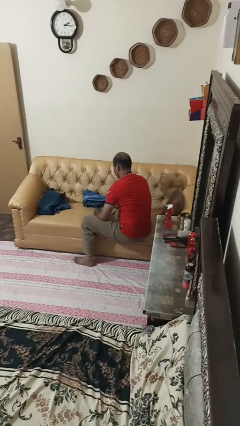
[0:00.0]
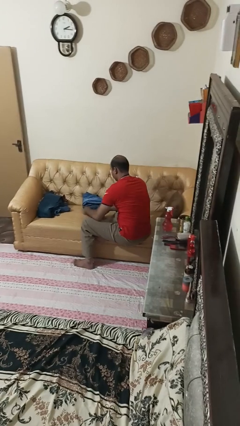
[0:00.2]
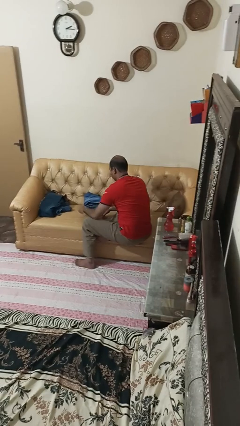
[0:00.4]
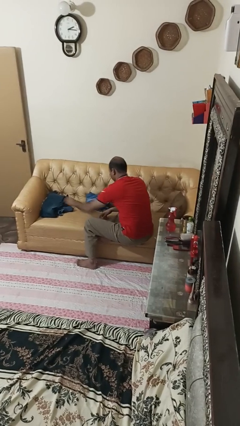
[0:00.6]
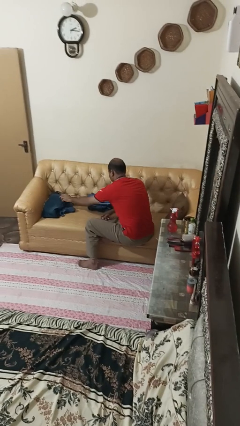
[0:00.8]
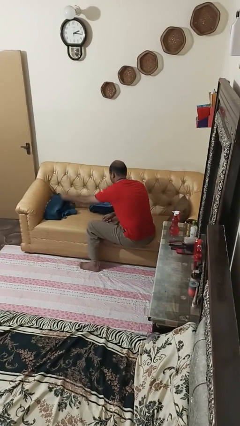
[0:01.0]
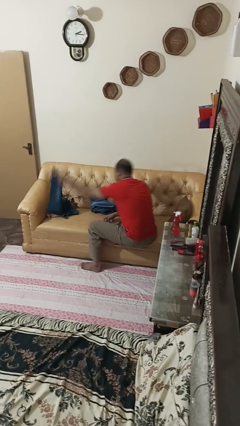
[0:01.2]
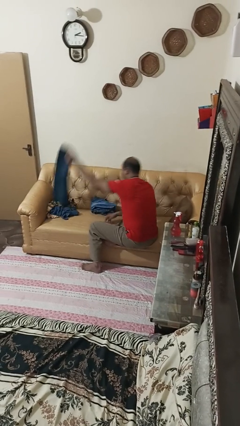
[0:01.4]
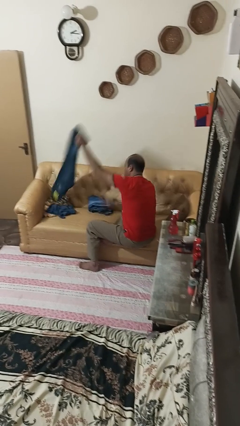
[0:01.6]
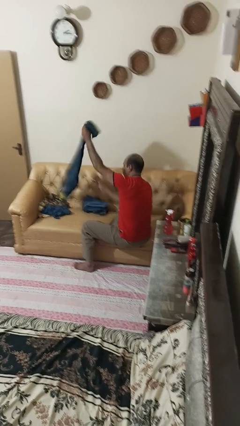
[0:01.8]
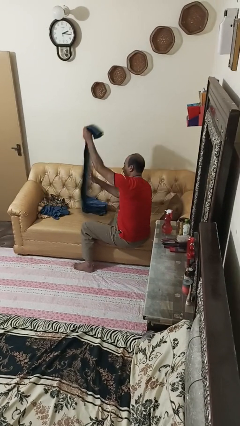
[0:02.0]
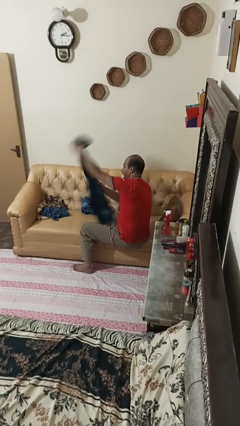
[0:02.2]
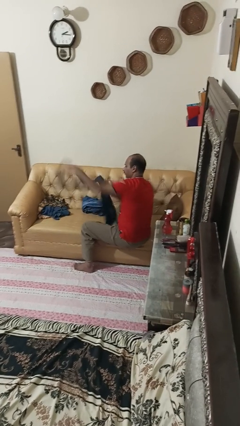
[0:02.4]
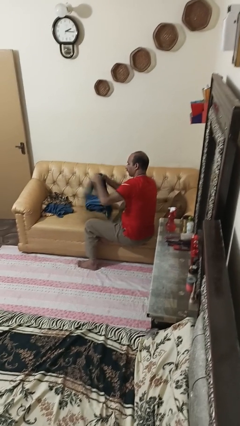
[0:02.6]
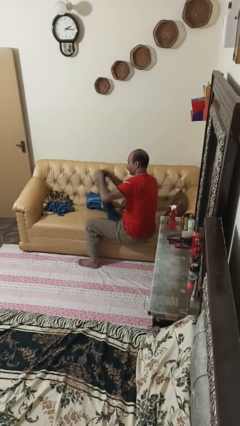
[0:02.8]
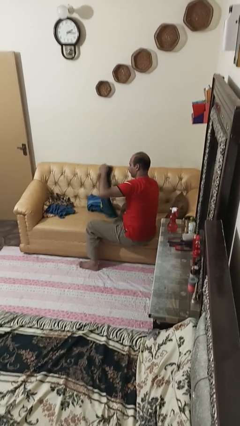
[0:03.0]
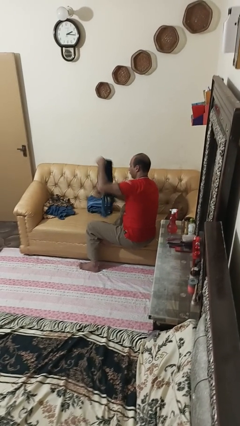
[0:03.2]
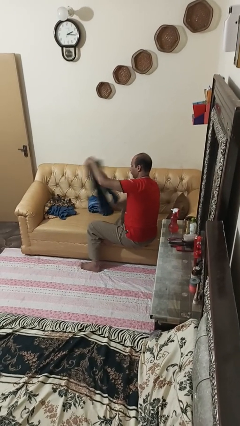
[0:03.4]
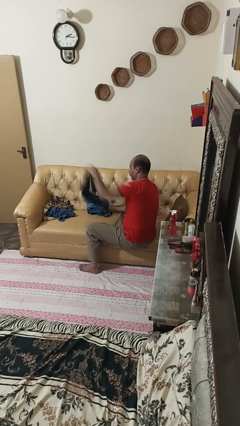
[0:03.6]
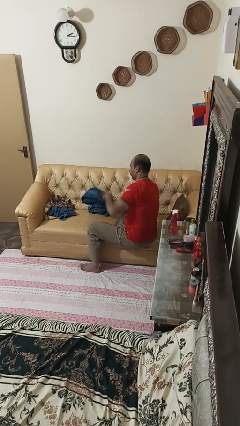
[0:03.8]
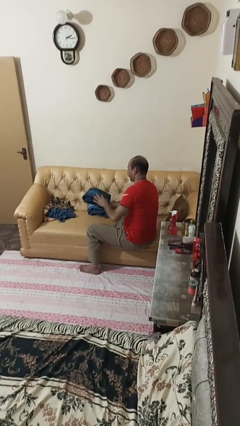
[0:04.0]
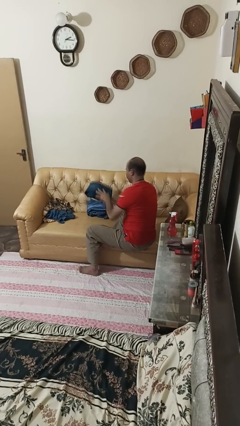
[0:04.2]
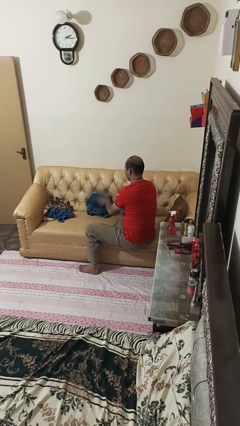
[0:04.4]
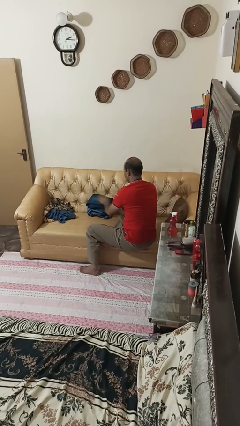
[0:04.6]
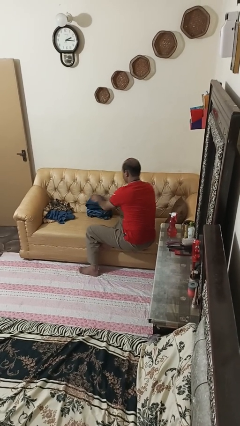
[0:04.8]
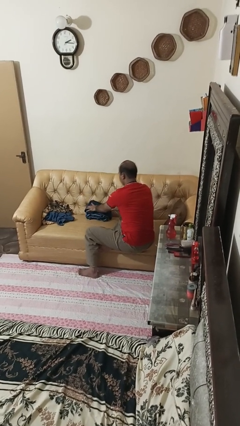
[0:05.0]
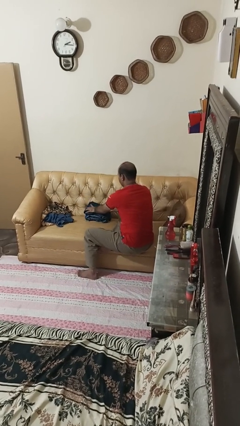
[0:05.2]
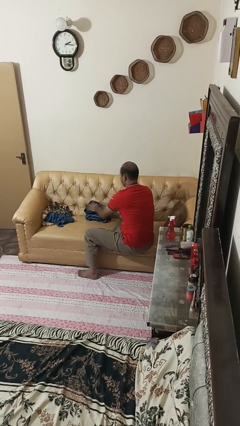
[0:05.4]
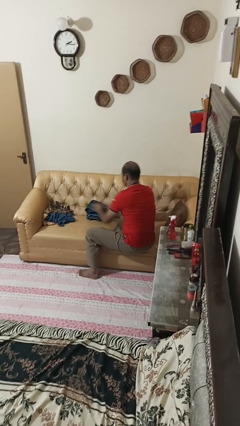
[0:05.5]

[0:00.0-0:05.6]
person folds pants

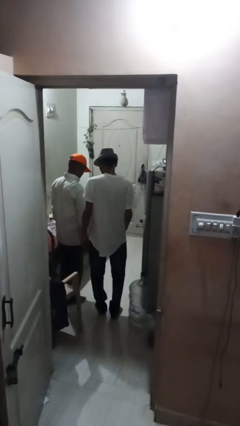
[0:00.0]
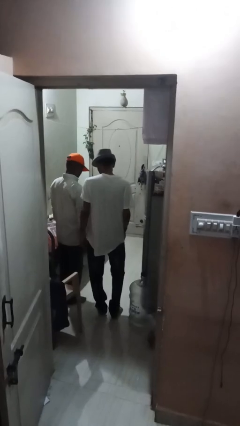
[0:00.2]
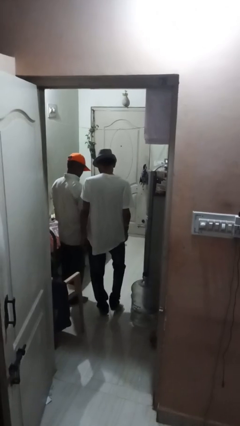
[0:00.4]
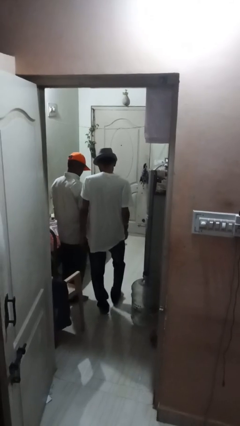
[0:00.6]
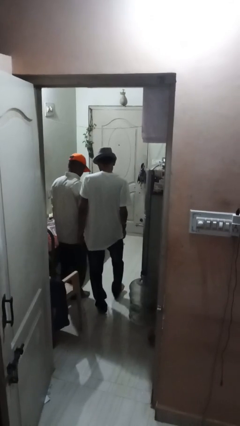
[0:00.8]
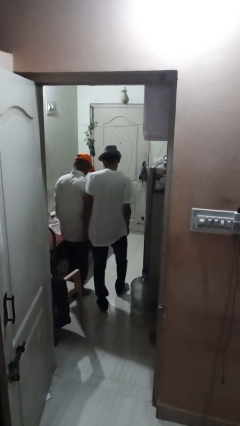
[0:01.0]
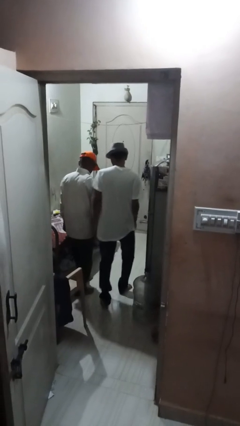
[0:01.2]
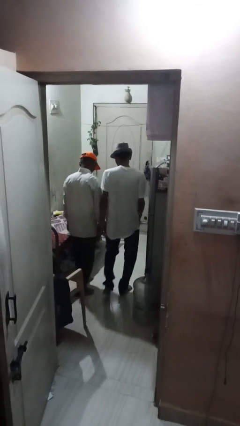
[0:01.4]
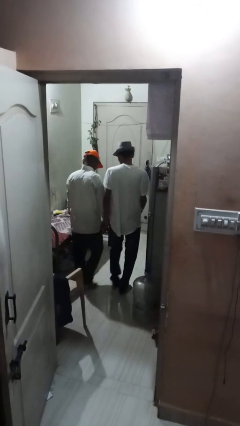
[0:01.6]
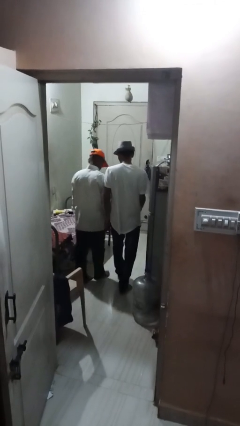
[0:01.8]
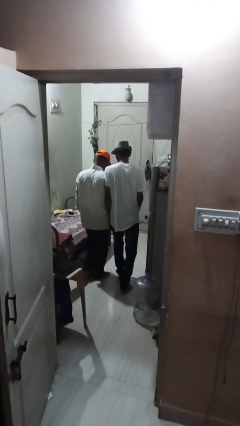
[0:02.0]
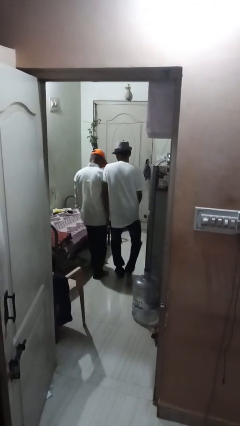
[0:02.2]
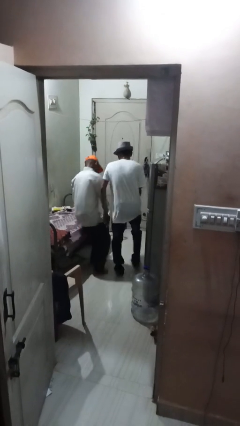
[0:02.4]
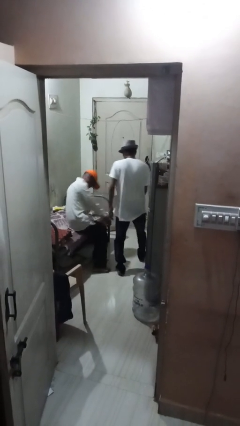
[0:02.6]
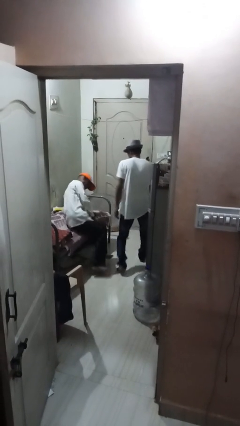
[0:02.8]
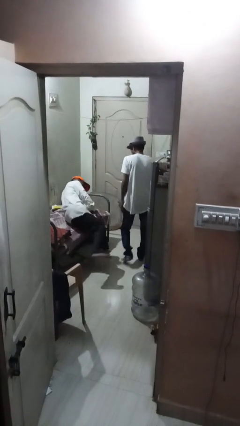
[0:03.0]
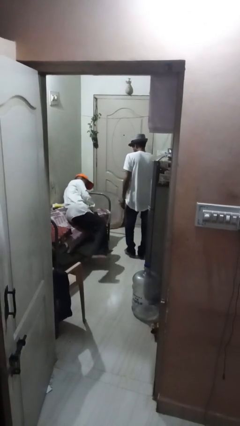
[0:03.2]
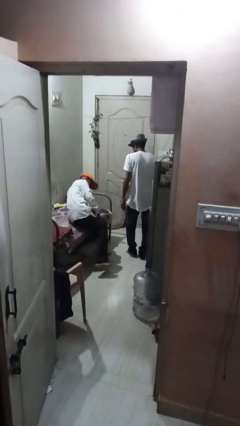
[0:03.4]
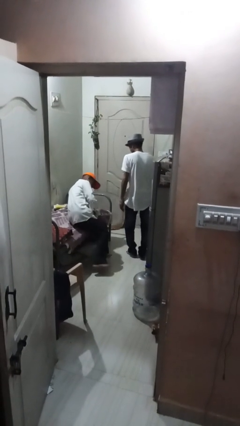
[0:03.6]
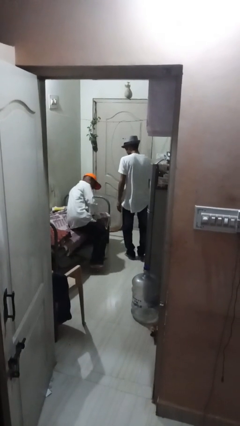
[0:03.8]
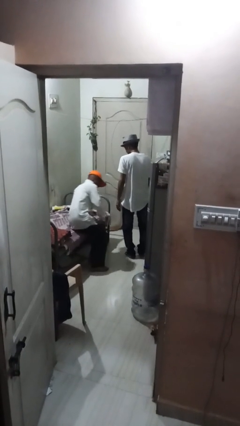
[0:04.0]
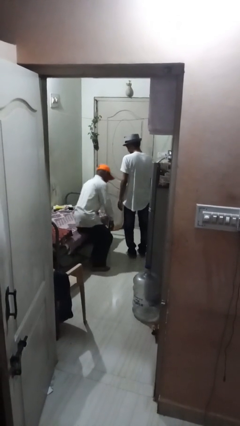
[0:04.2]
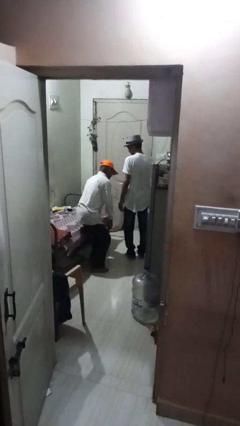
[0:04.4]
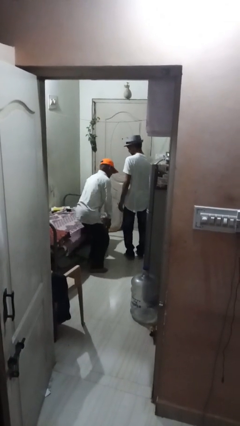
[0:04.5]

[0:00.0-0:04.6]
person bumps into person

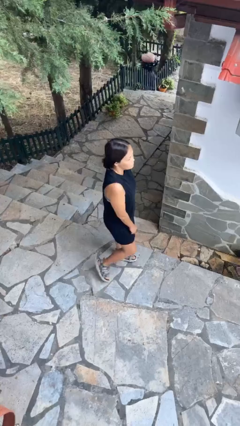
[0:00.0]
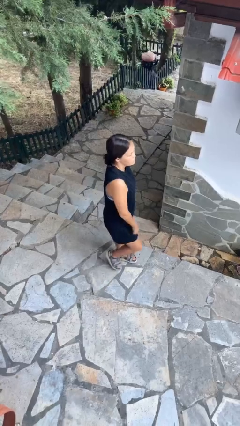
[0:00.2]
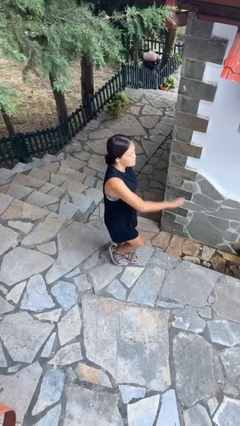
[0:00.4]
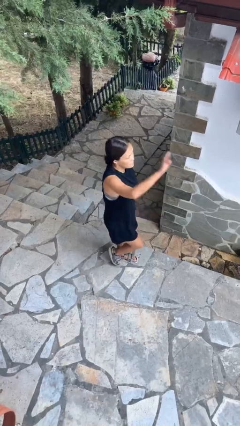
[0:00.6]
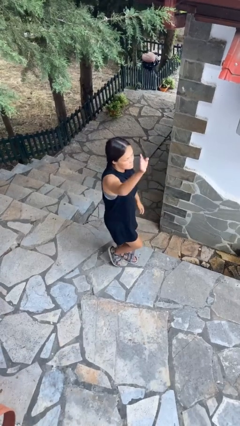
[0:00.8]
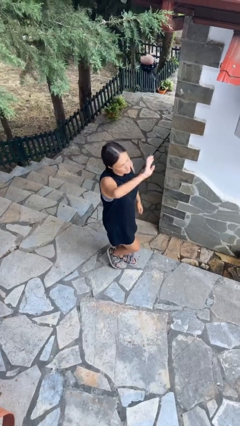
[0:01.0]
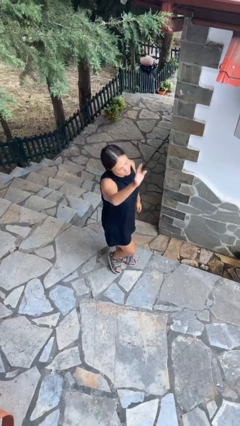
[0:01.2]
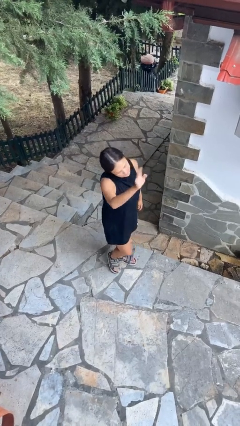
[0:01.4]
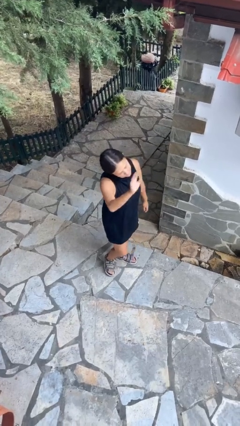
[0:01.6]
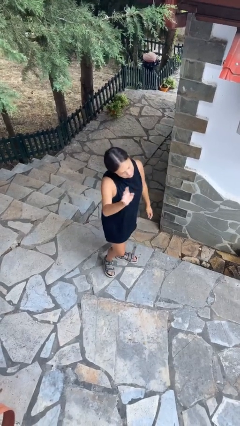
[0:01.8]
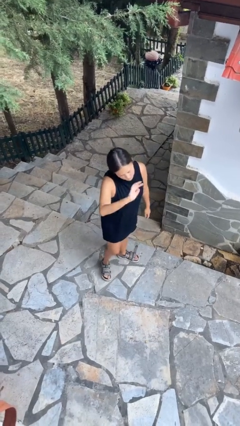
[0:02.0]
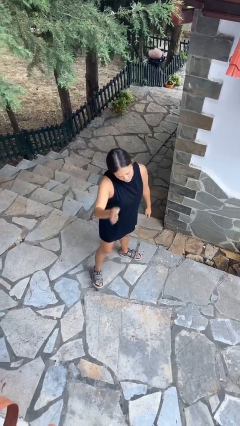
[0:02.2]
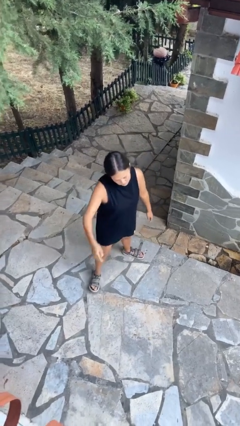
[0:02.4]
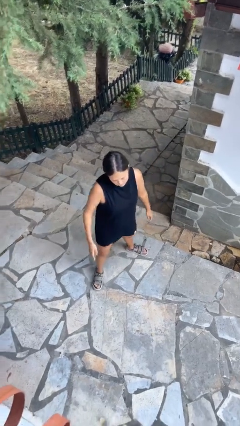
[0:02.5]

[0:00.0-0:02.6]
person waves at person

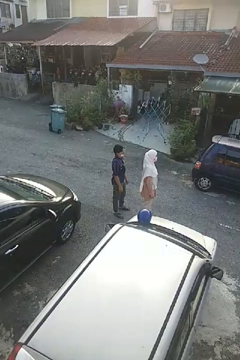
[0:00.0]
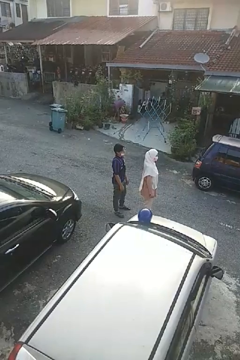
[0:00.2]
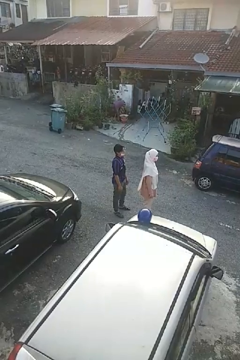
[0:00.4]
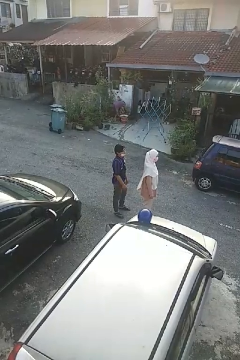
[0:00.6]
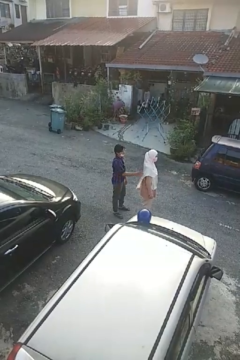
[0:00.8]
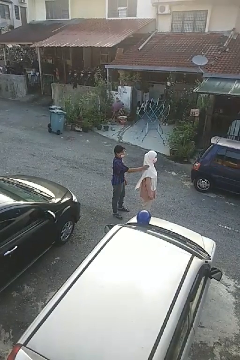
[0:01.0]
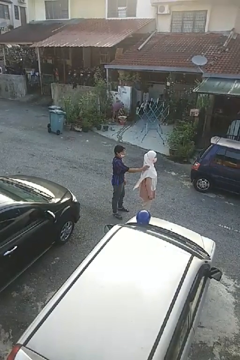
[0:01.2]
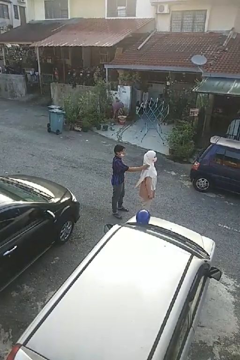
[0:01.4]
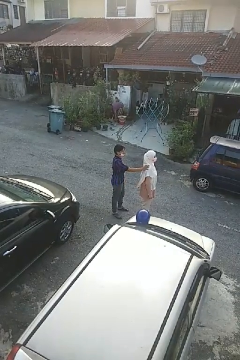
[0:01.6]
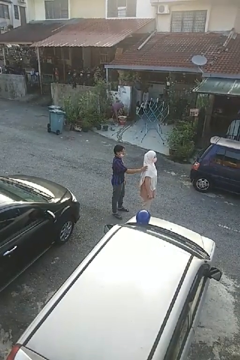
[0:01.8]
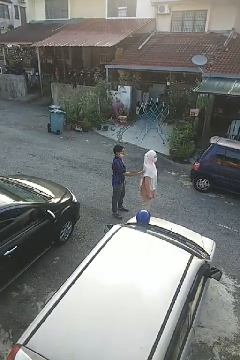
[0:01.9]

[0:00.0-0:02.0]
person touches back of person

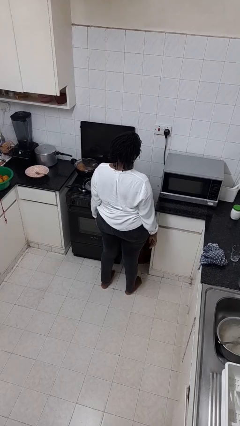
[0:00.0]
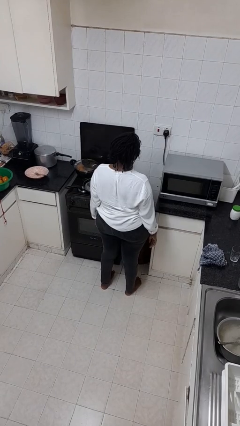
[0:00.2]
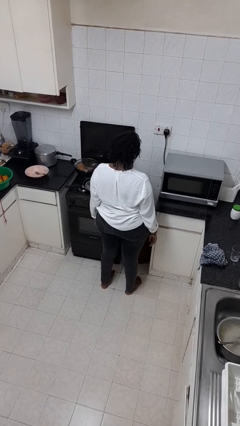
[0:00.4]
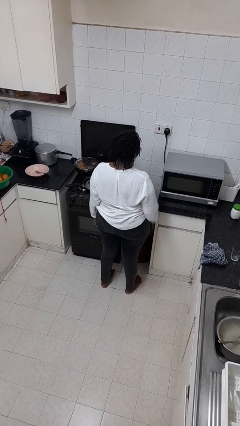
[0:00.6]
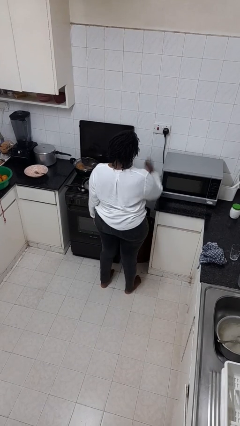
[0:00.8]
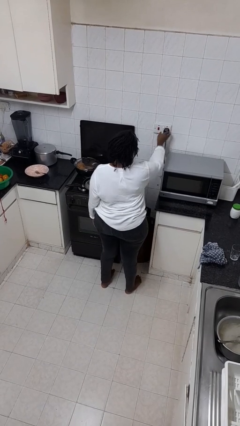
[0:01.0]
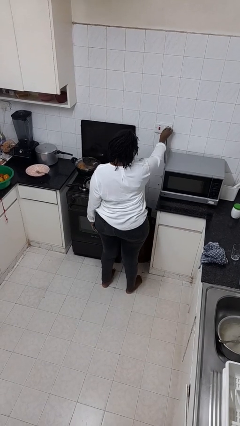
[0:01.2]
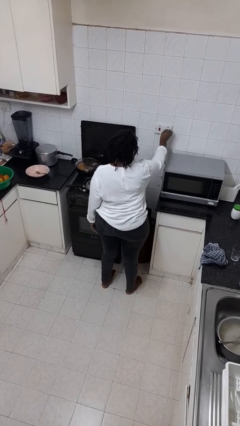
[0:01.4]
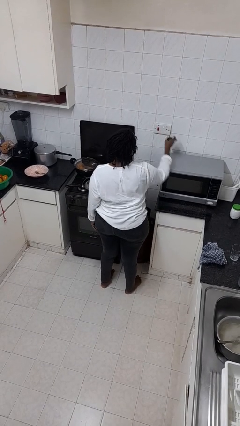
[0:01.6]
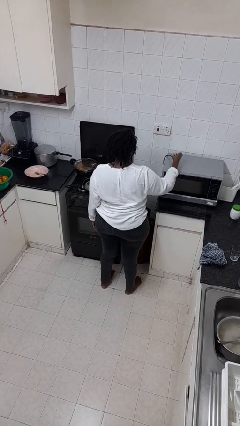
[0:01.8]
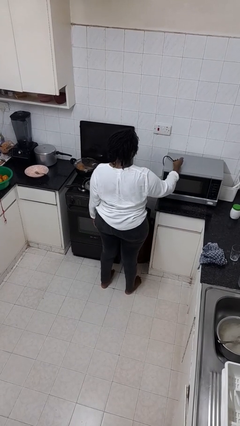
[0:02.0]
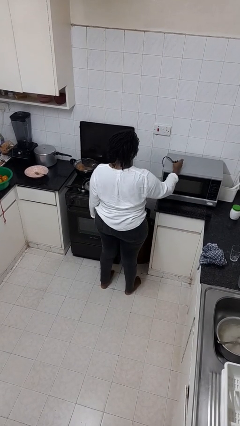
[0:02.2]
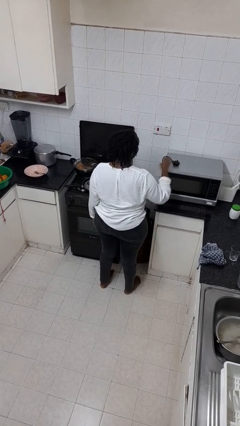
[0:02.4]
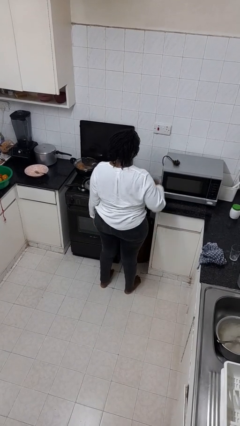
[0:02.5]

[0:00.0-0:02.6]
person unplugs from electrical socket

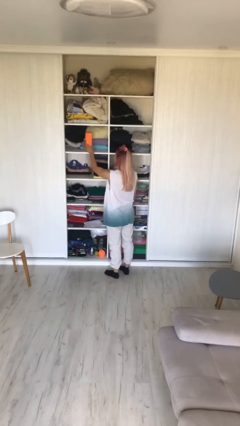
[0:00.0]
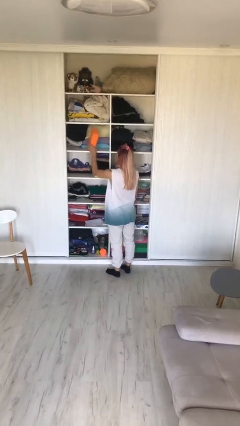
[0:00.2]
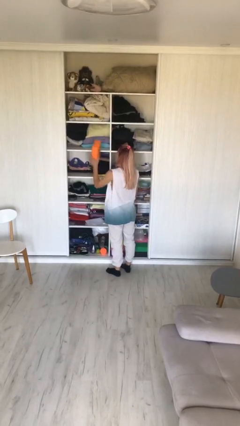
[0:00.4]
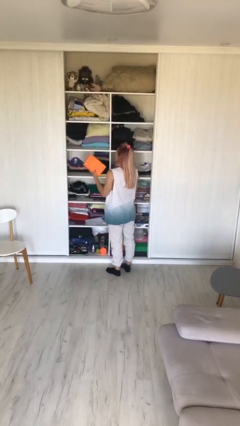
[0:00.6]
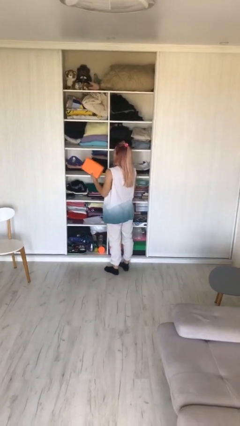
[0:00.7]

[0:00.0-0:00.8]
person picks up object from shelf
